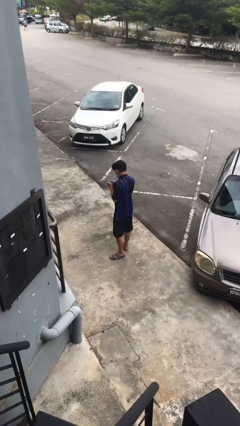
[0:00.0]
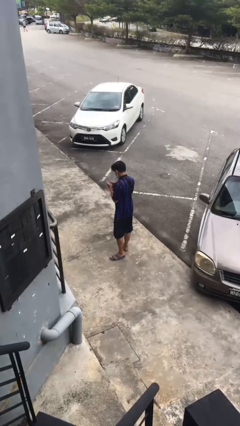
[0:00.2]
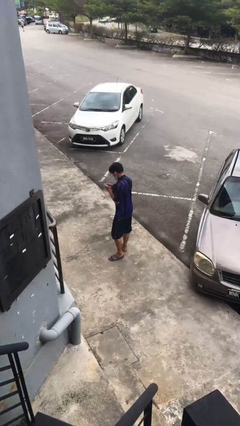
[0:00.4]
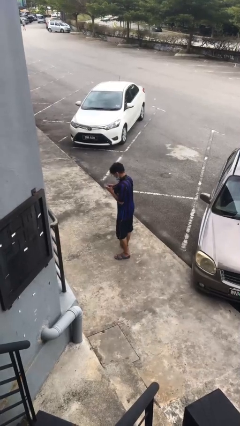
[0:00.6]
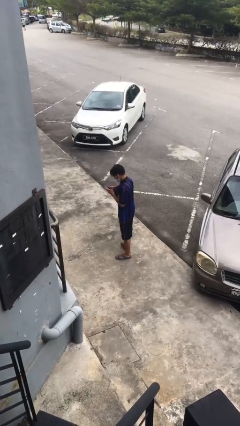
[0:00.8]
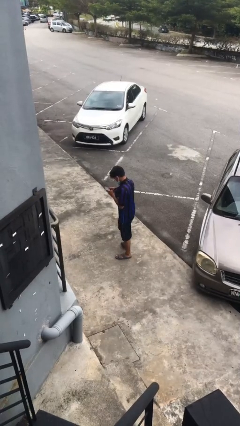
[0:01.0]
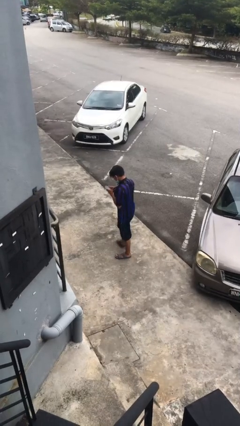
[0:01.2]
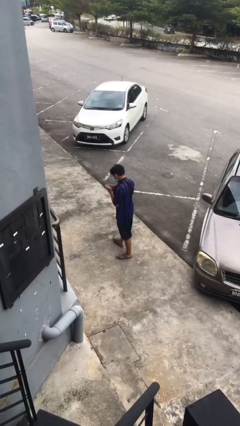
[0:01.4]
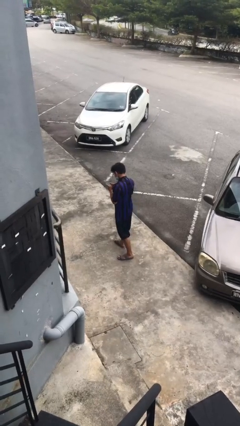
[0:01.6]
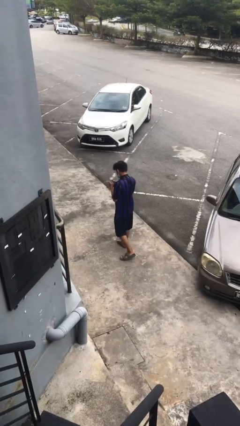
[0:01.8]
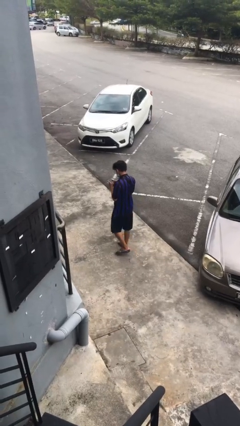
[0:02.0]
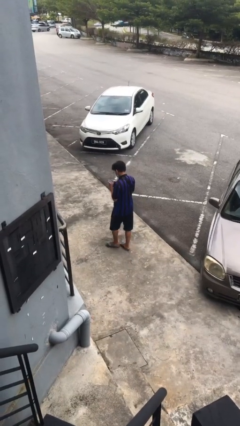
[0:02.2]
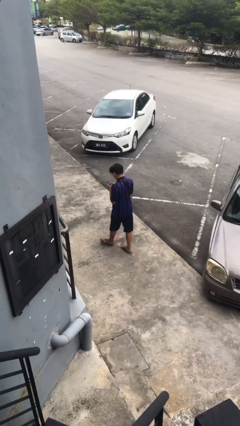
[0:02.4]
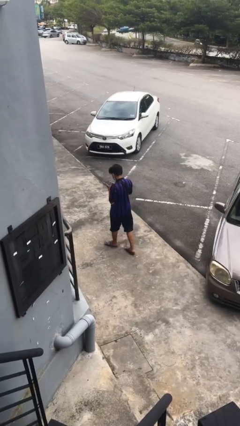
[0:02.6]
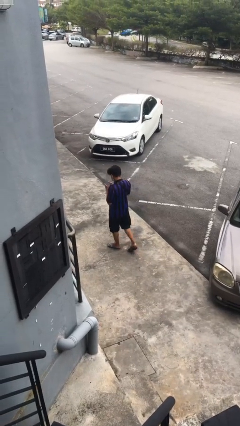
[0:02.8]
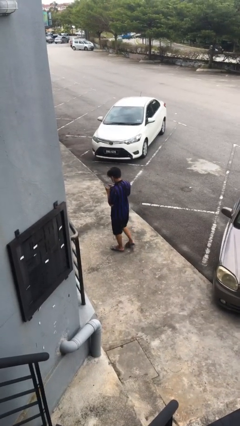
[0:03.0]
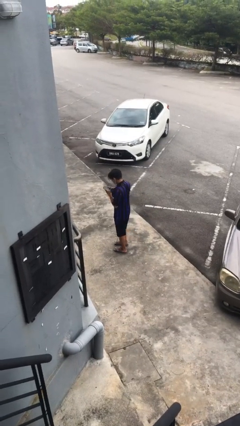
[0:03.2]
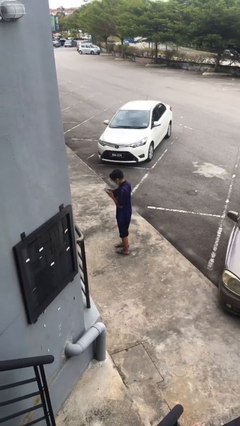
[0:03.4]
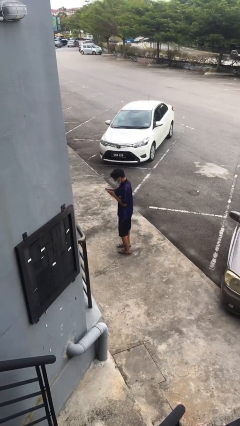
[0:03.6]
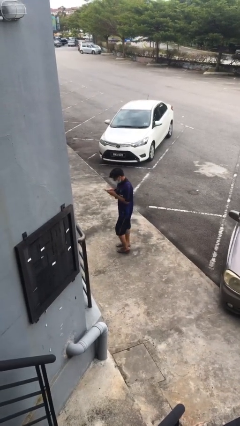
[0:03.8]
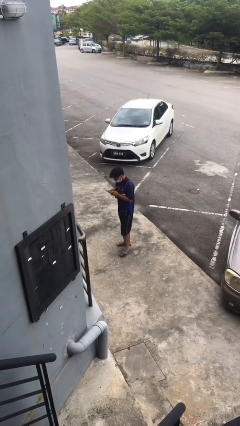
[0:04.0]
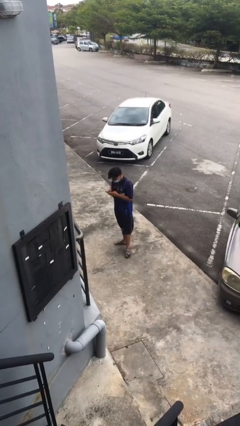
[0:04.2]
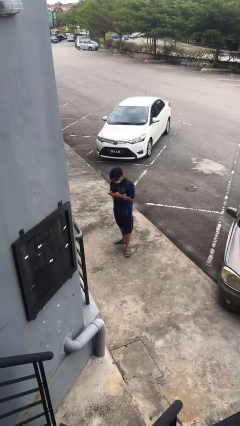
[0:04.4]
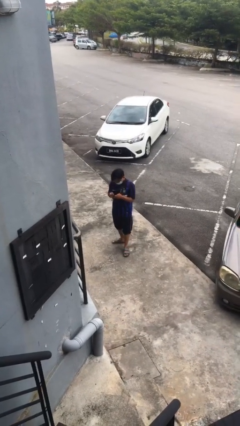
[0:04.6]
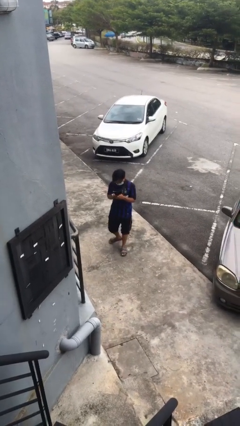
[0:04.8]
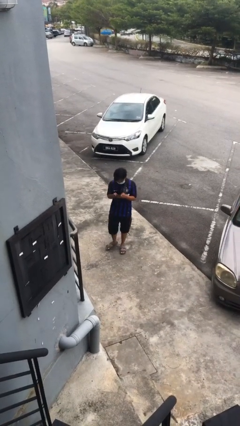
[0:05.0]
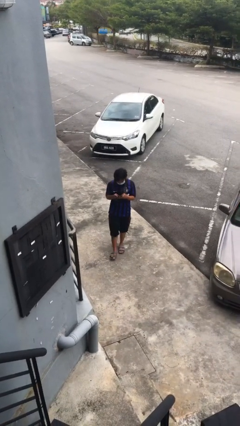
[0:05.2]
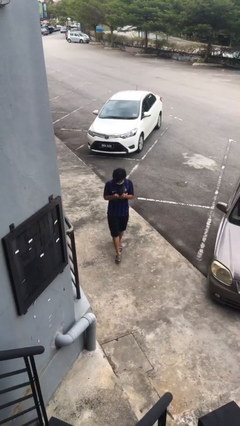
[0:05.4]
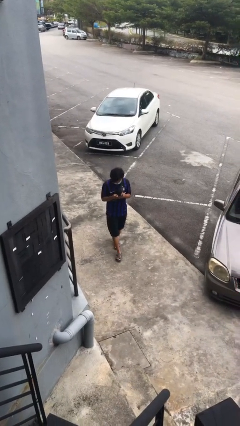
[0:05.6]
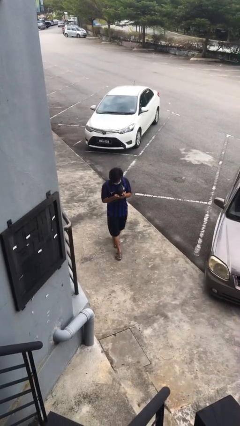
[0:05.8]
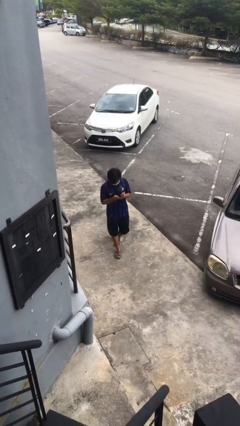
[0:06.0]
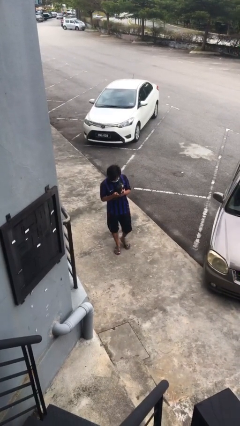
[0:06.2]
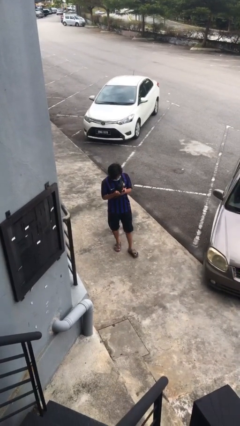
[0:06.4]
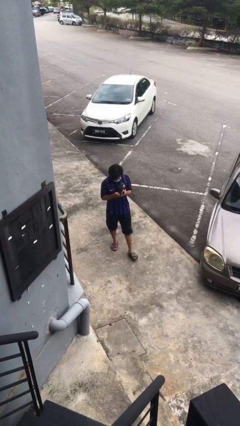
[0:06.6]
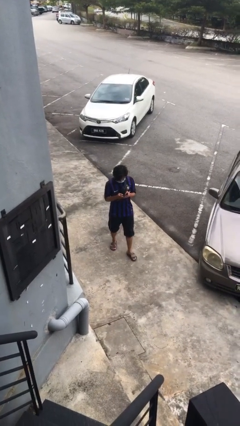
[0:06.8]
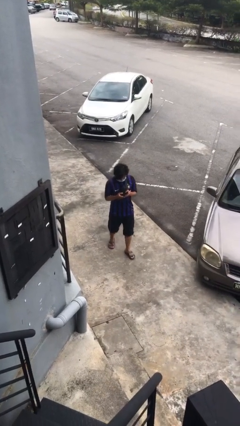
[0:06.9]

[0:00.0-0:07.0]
person texts on phone

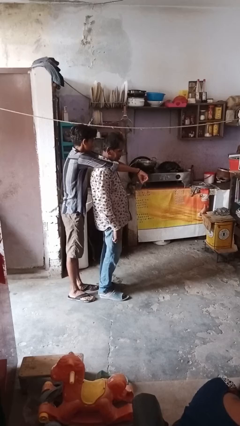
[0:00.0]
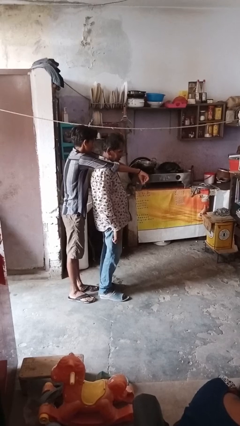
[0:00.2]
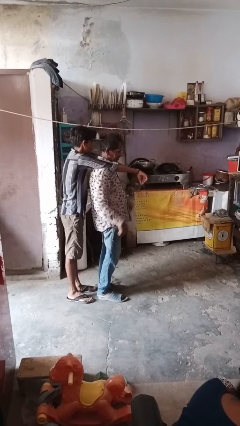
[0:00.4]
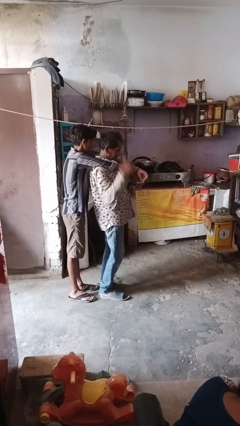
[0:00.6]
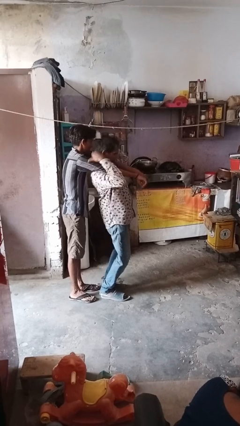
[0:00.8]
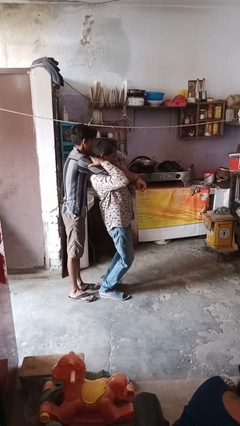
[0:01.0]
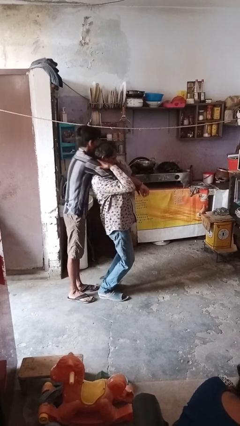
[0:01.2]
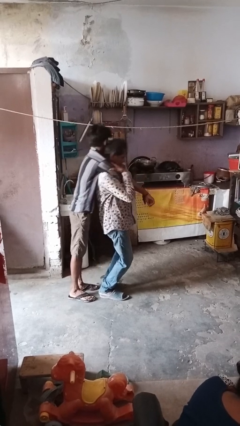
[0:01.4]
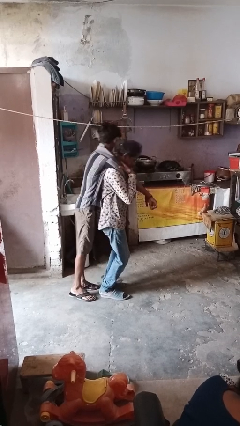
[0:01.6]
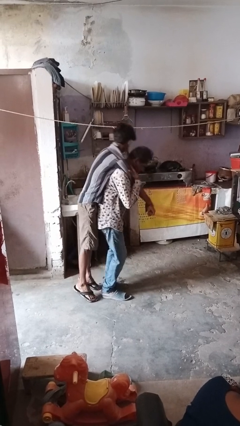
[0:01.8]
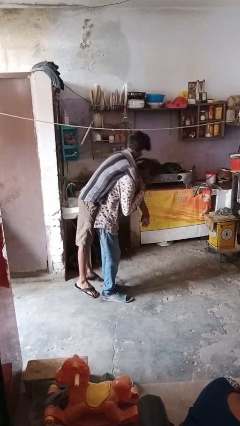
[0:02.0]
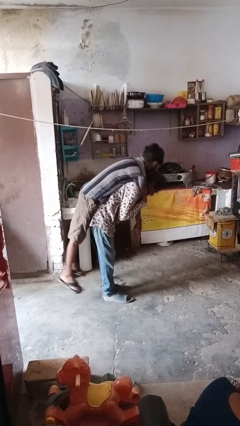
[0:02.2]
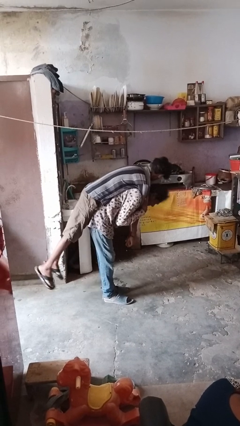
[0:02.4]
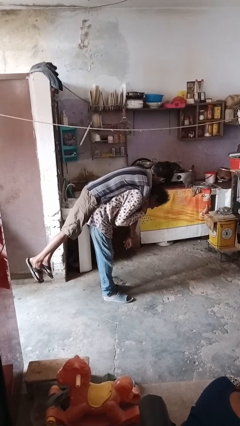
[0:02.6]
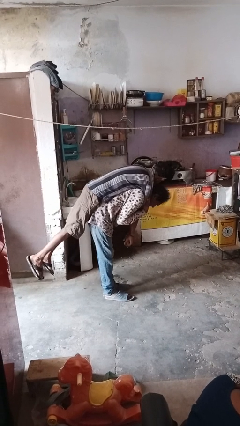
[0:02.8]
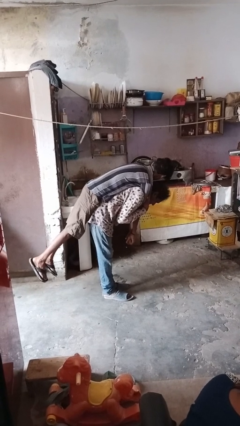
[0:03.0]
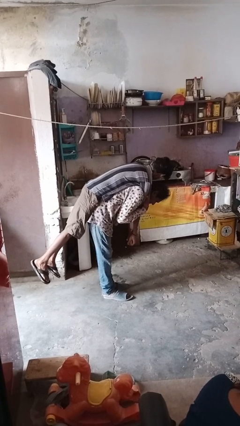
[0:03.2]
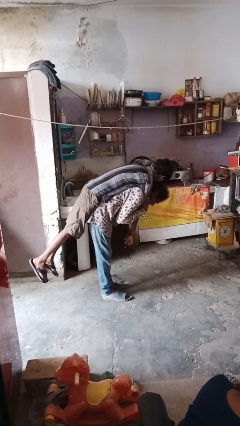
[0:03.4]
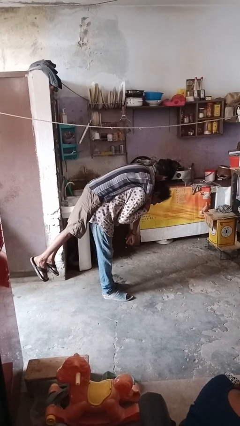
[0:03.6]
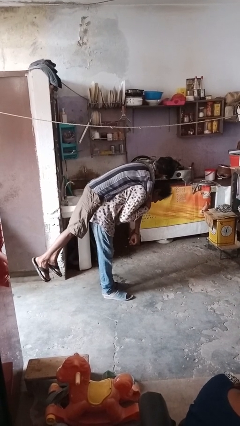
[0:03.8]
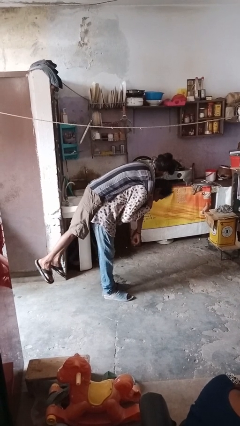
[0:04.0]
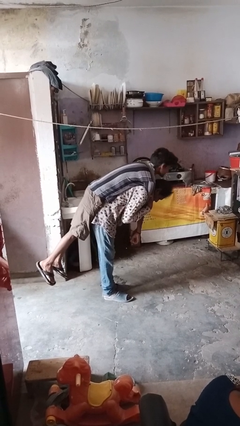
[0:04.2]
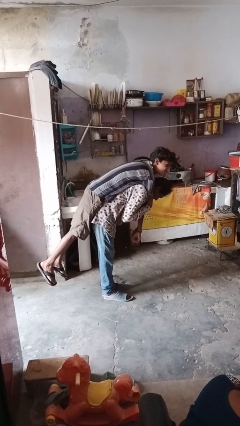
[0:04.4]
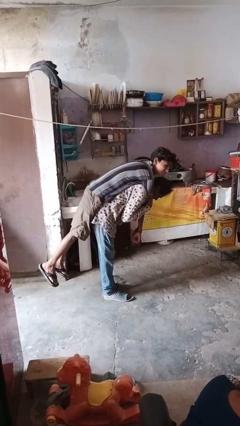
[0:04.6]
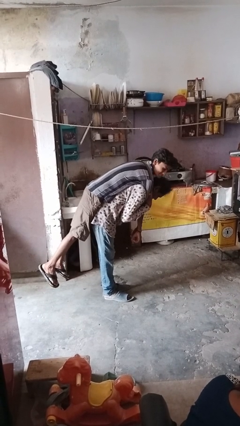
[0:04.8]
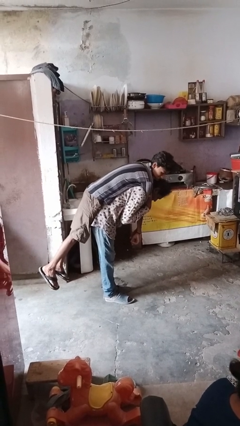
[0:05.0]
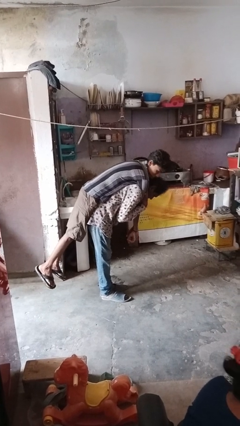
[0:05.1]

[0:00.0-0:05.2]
person carries person over shoulder

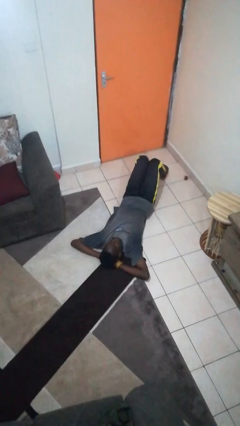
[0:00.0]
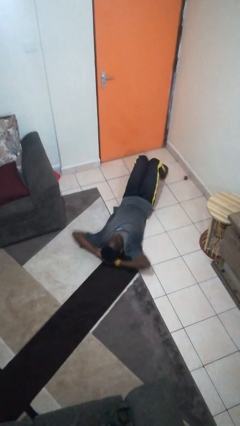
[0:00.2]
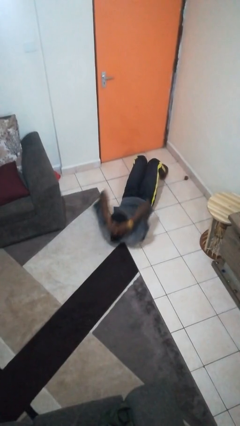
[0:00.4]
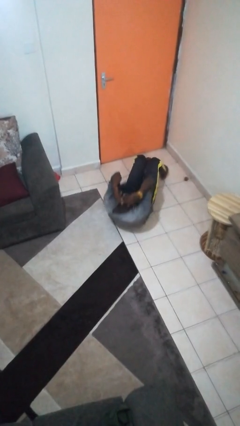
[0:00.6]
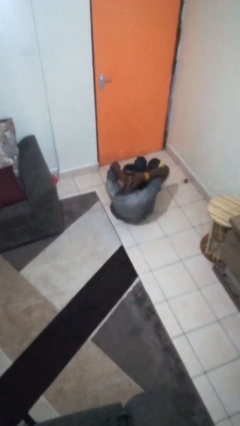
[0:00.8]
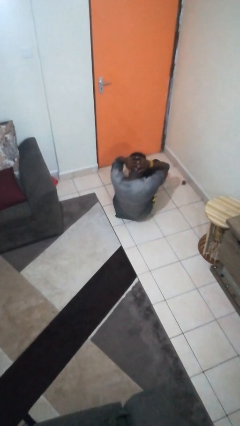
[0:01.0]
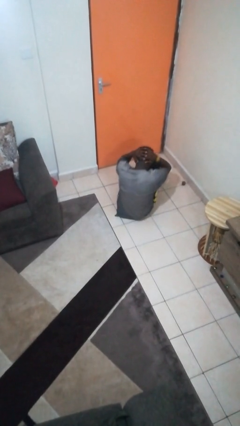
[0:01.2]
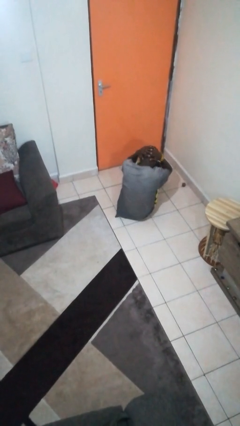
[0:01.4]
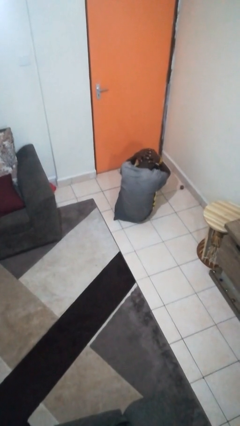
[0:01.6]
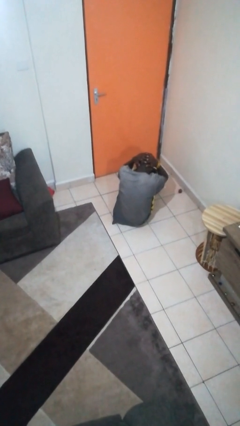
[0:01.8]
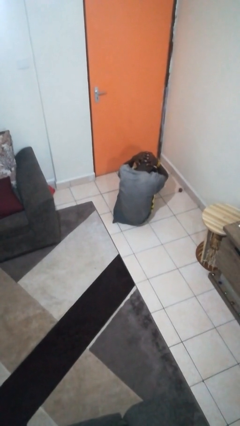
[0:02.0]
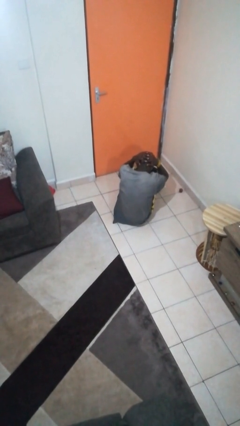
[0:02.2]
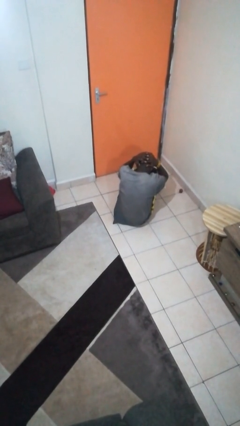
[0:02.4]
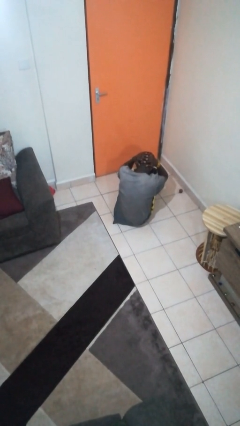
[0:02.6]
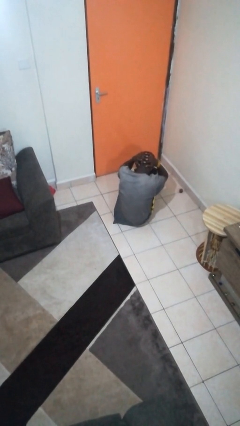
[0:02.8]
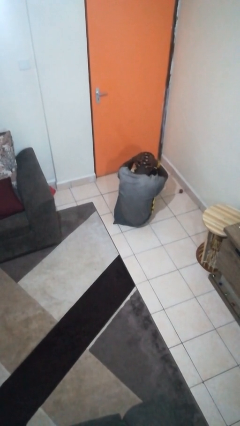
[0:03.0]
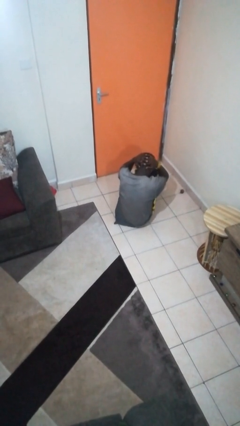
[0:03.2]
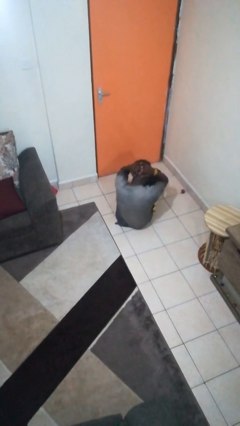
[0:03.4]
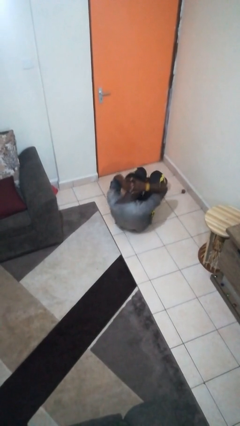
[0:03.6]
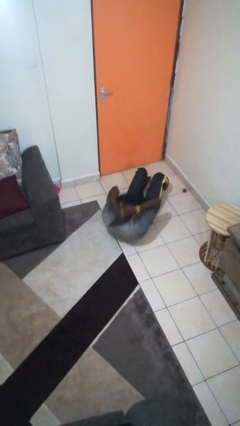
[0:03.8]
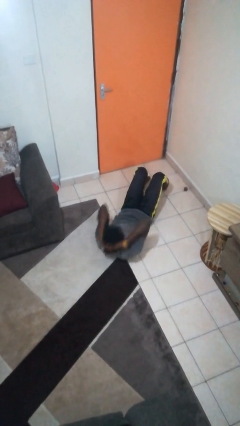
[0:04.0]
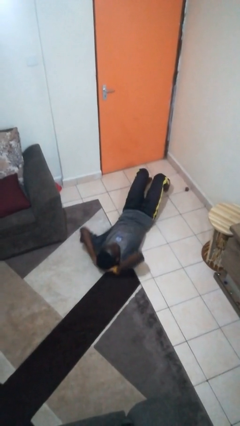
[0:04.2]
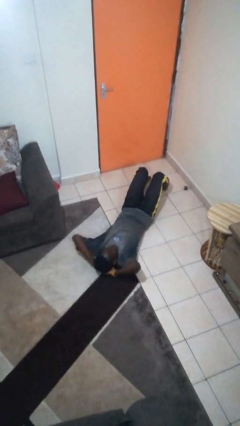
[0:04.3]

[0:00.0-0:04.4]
person exercises with situp

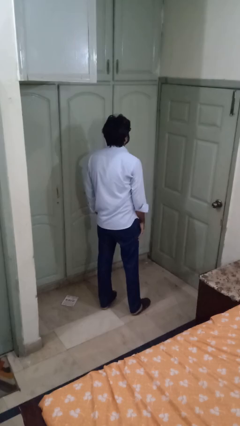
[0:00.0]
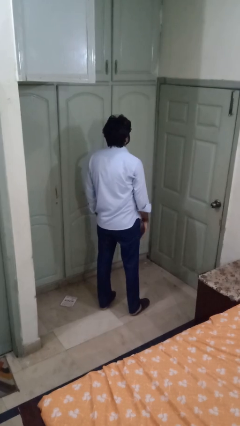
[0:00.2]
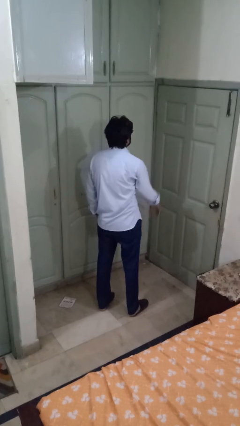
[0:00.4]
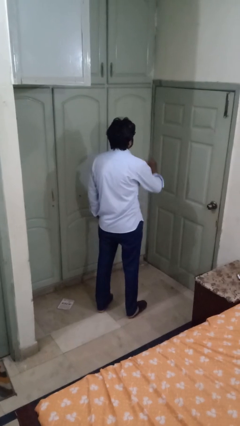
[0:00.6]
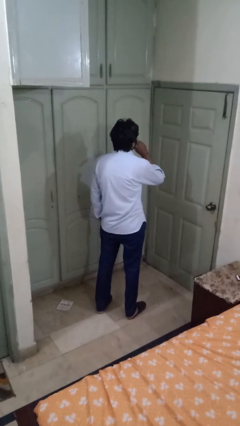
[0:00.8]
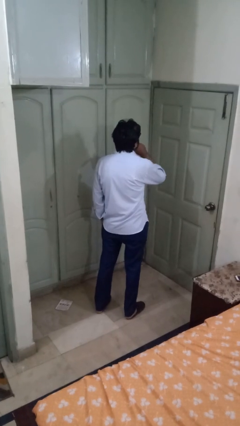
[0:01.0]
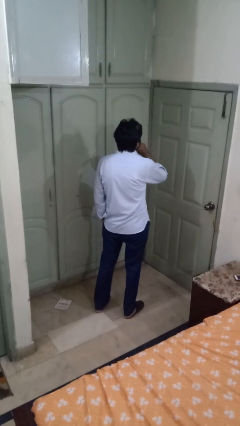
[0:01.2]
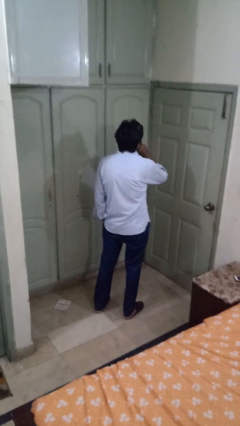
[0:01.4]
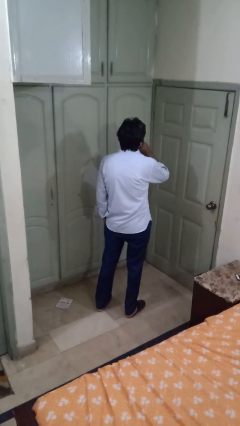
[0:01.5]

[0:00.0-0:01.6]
person gestures be quiet
